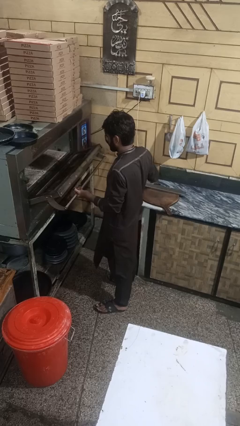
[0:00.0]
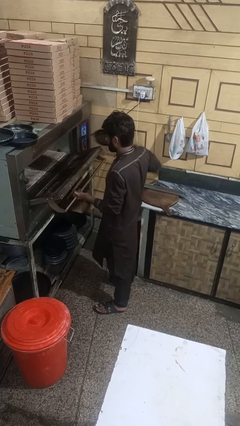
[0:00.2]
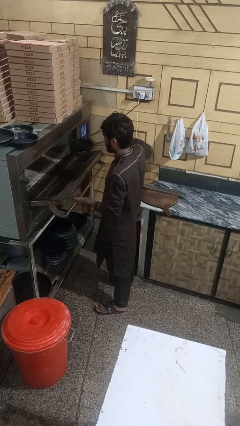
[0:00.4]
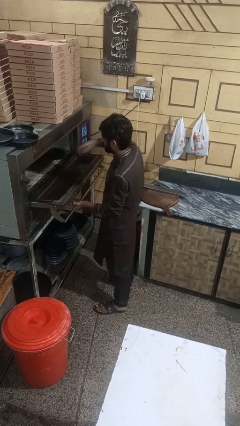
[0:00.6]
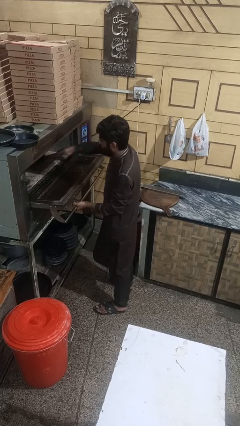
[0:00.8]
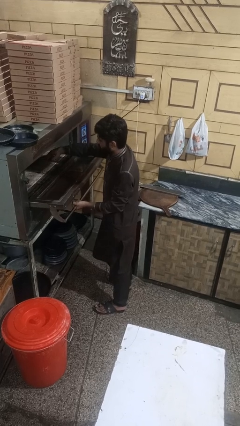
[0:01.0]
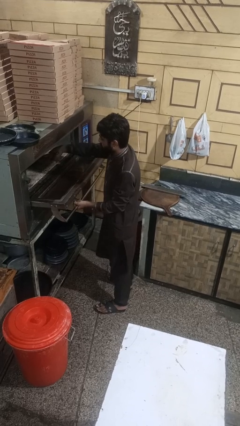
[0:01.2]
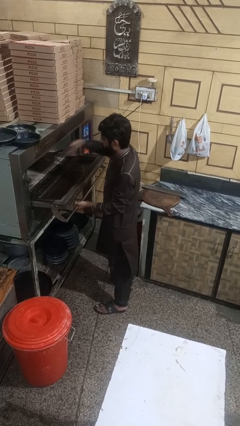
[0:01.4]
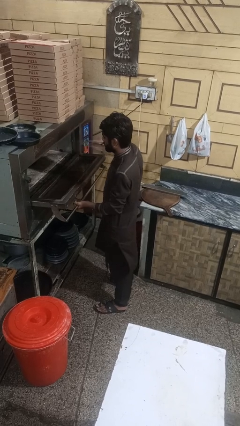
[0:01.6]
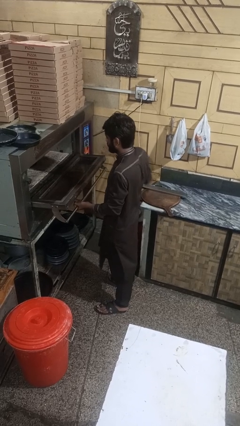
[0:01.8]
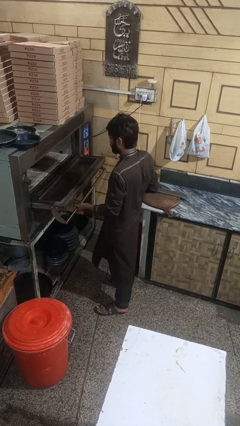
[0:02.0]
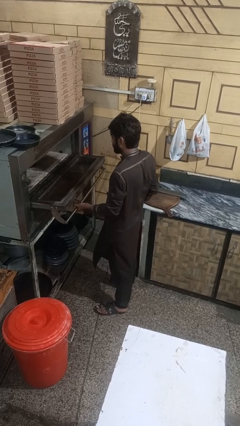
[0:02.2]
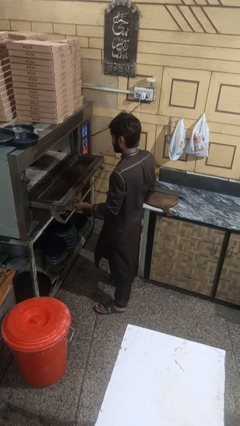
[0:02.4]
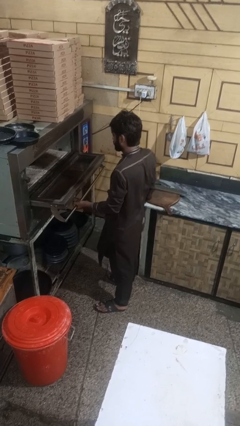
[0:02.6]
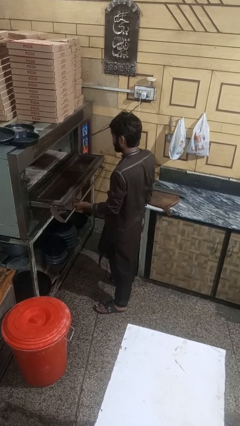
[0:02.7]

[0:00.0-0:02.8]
person puts object into microwave

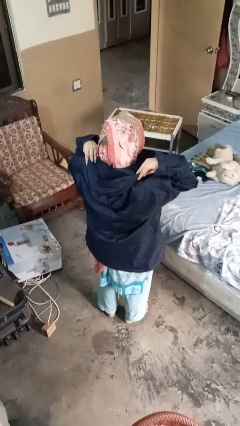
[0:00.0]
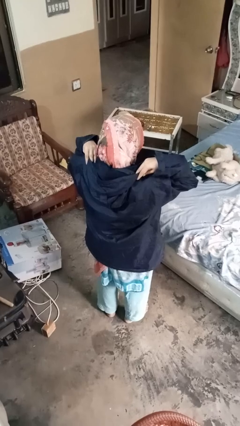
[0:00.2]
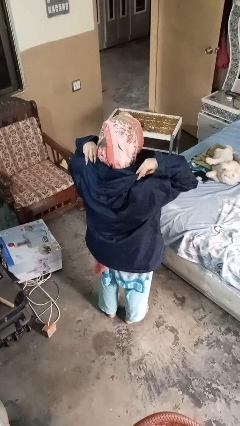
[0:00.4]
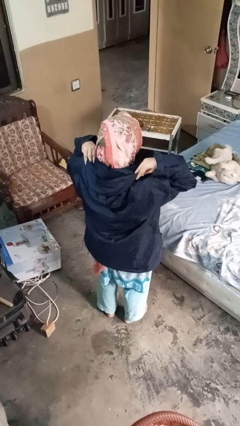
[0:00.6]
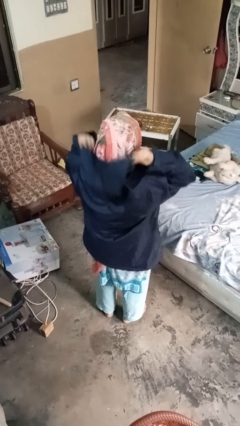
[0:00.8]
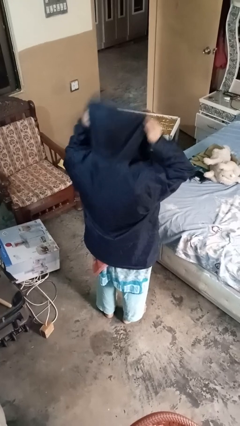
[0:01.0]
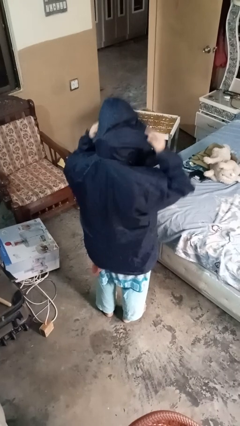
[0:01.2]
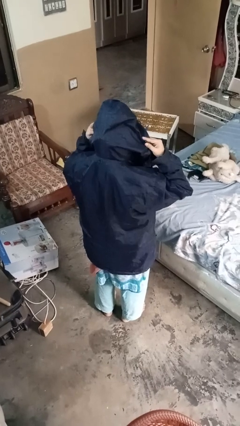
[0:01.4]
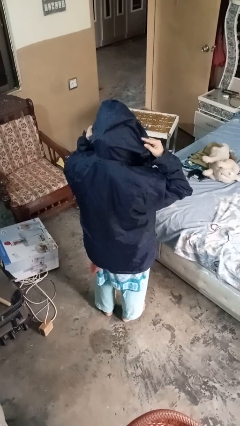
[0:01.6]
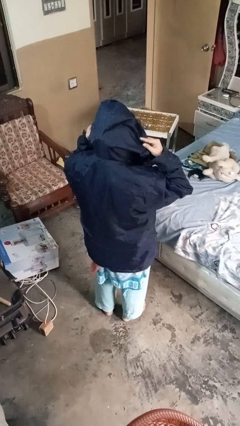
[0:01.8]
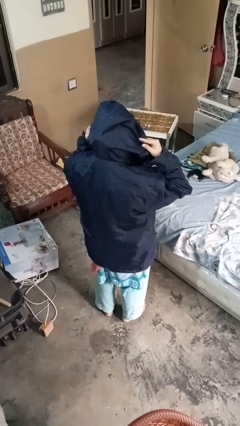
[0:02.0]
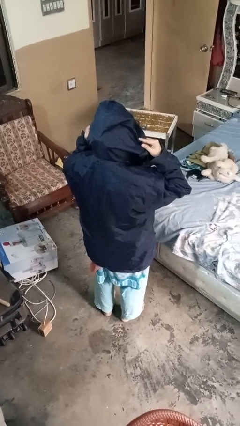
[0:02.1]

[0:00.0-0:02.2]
person puts on hoodie

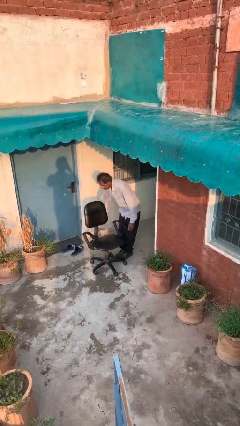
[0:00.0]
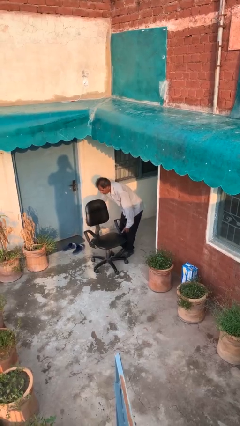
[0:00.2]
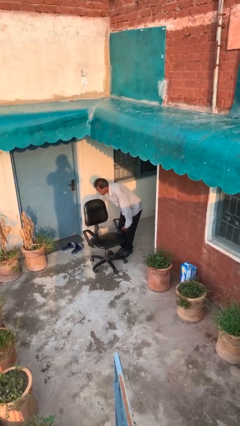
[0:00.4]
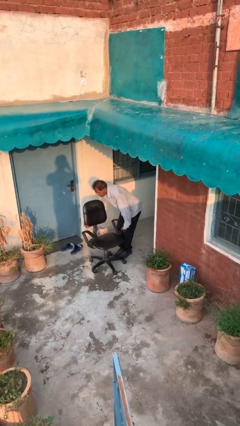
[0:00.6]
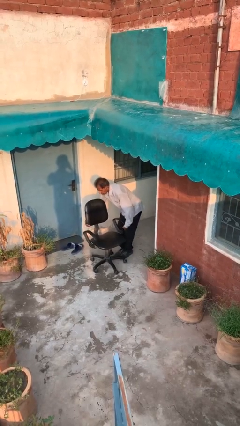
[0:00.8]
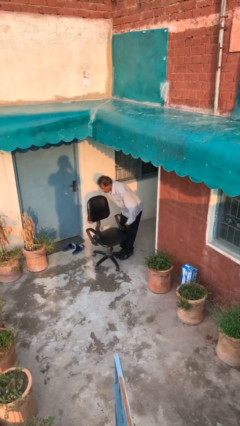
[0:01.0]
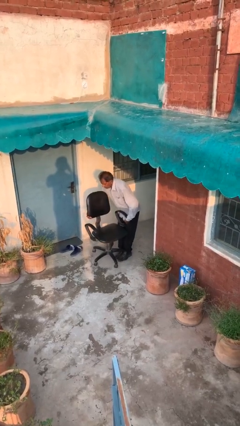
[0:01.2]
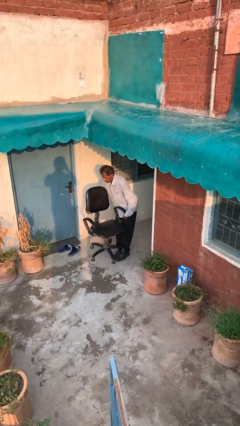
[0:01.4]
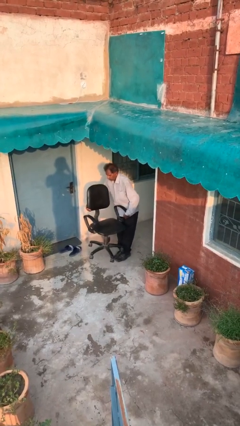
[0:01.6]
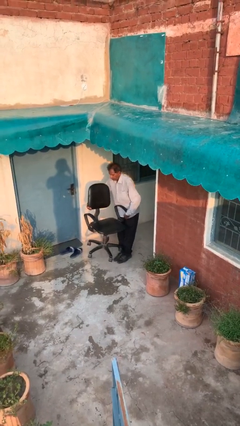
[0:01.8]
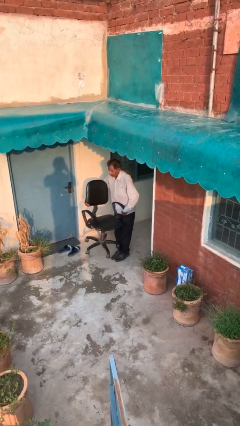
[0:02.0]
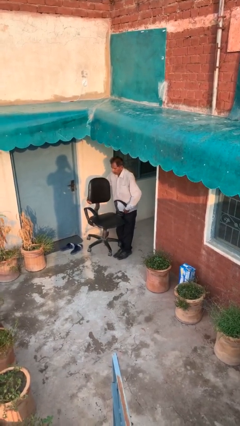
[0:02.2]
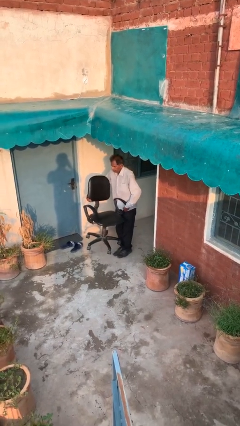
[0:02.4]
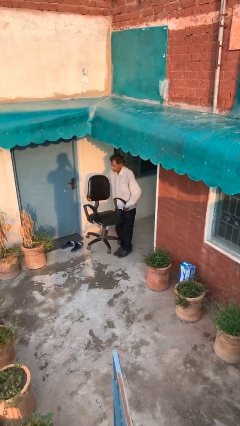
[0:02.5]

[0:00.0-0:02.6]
person picks up object from floor

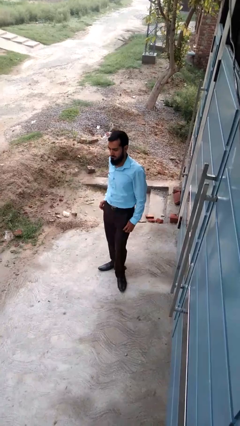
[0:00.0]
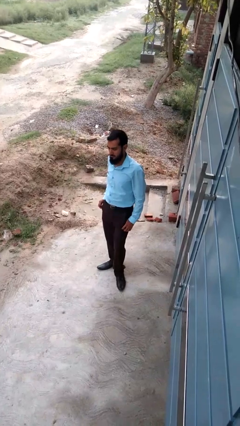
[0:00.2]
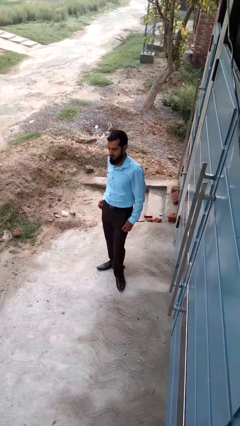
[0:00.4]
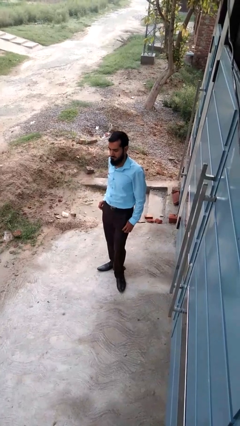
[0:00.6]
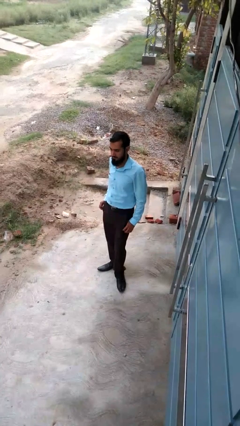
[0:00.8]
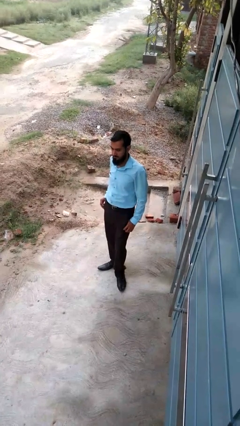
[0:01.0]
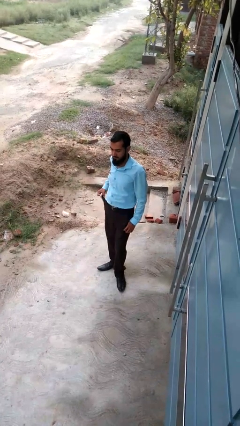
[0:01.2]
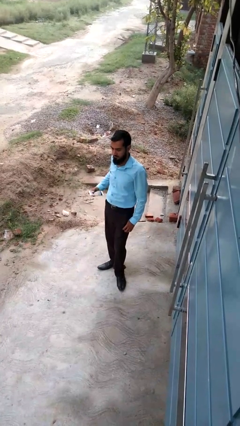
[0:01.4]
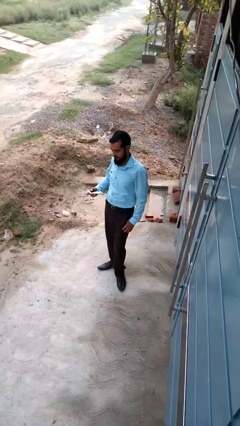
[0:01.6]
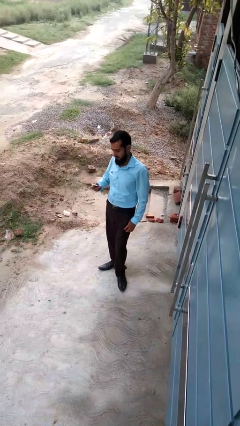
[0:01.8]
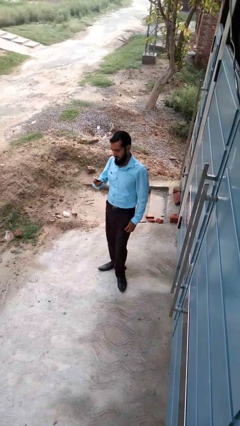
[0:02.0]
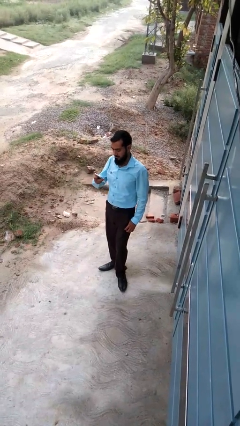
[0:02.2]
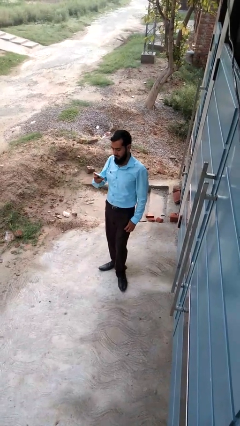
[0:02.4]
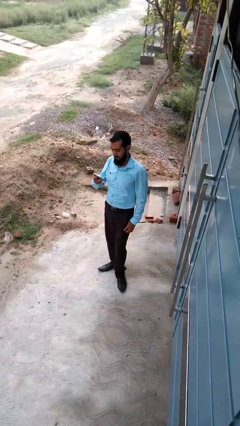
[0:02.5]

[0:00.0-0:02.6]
person takes phone from pocket

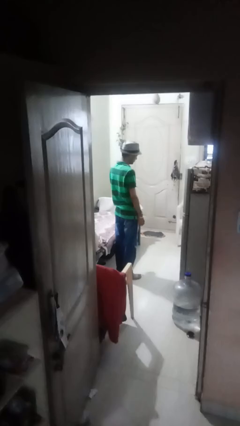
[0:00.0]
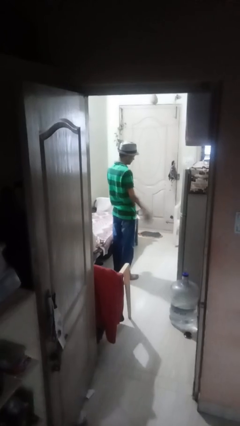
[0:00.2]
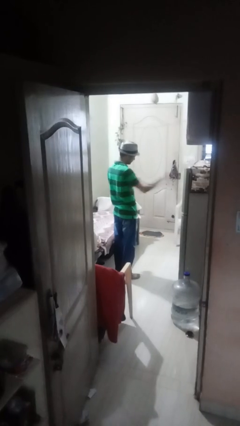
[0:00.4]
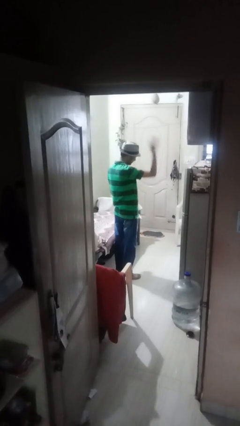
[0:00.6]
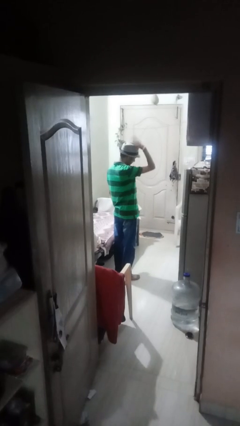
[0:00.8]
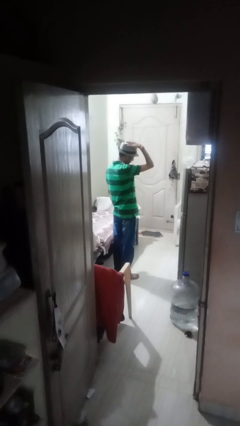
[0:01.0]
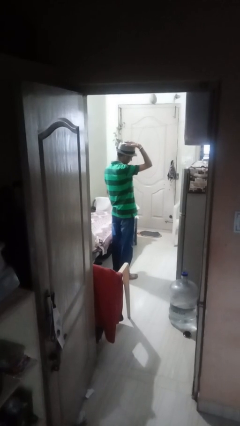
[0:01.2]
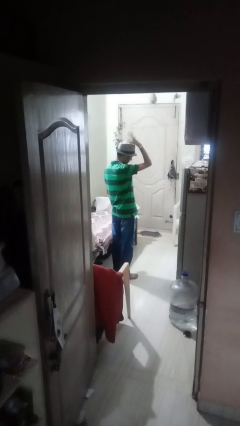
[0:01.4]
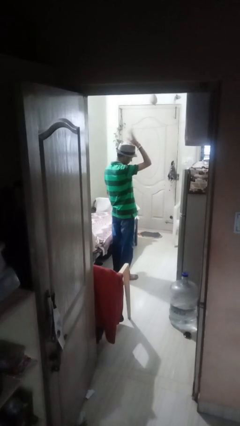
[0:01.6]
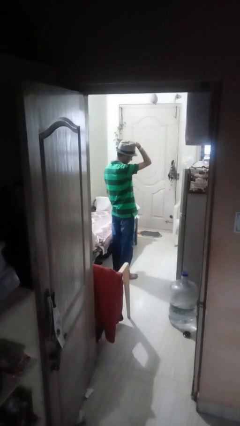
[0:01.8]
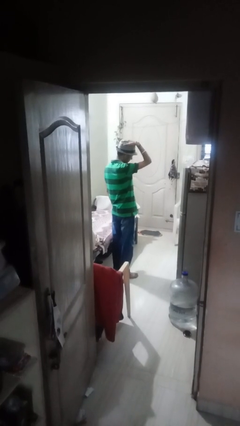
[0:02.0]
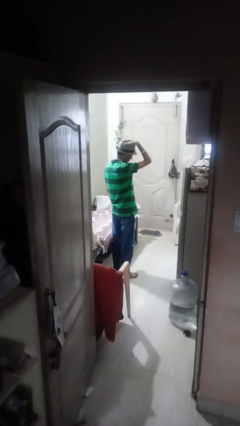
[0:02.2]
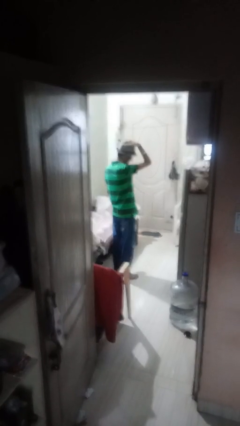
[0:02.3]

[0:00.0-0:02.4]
person pats head

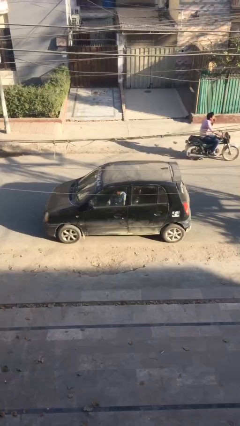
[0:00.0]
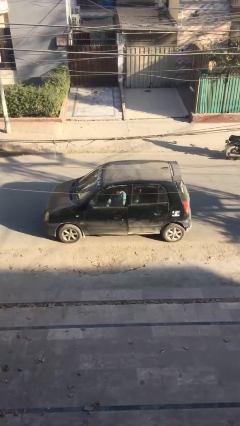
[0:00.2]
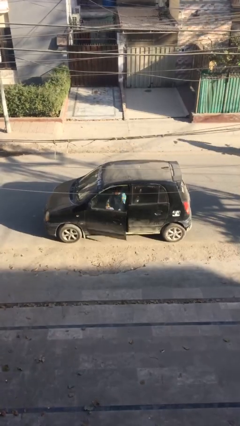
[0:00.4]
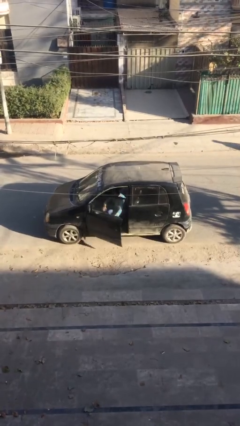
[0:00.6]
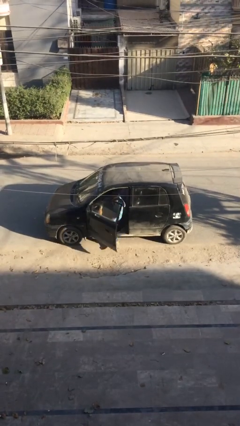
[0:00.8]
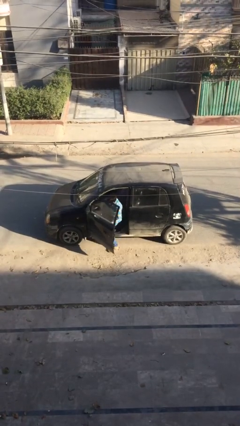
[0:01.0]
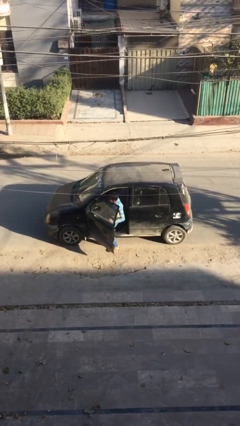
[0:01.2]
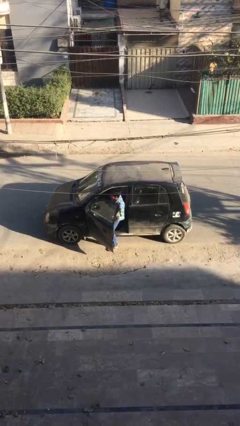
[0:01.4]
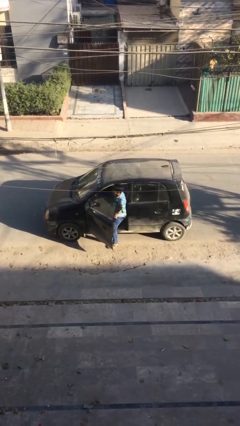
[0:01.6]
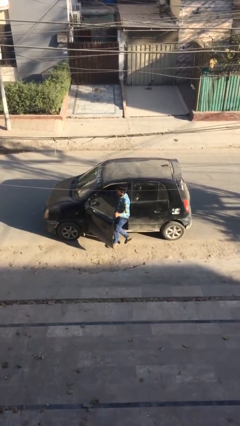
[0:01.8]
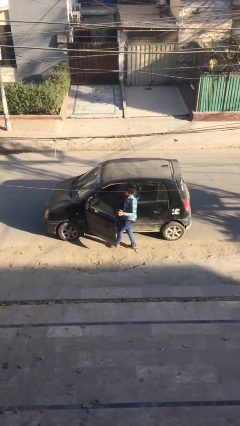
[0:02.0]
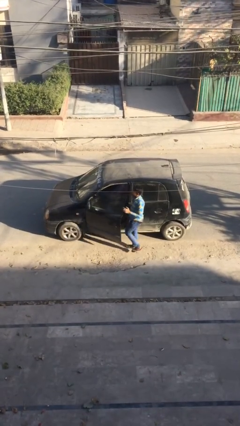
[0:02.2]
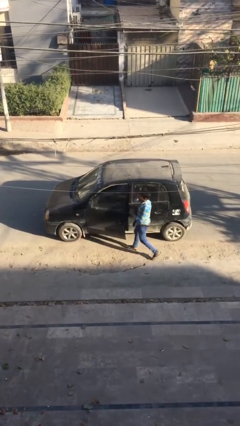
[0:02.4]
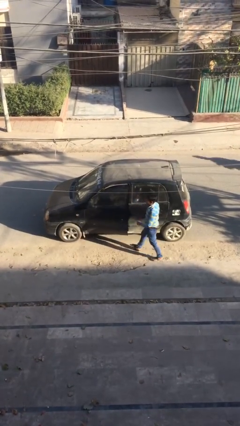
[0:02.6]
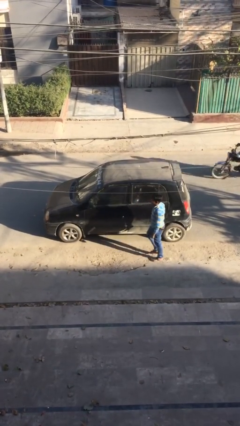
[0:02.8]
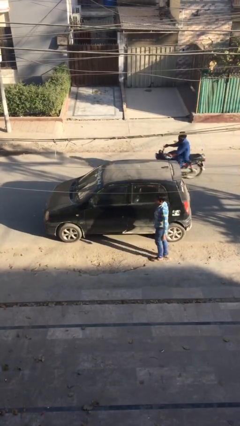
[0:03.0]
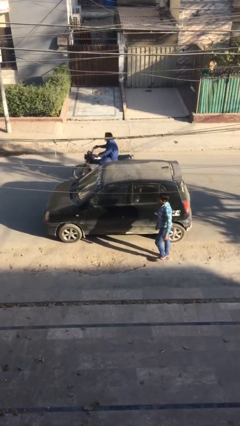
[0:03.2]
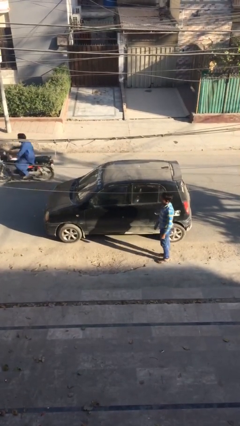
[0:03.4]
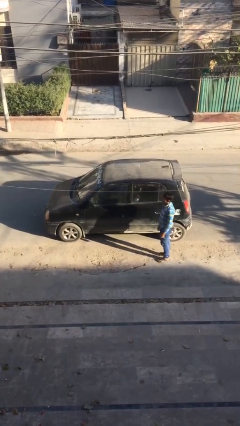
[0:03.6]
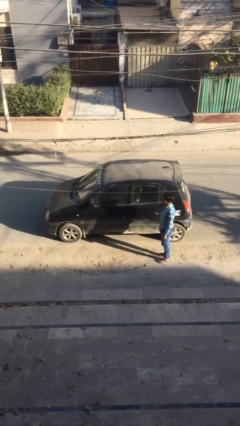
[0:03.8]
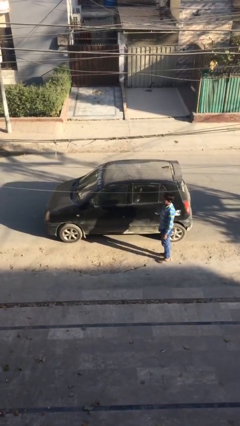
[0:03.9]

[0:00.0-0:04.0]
car drops off person

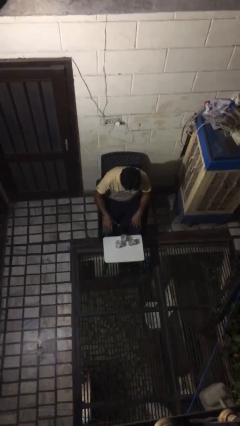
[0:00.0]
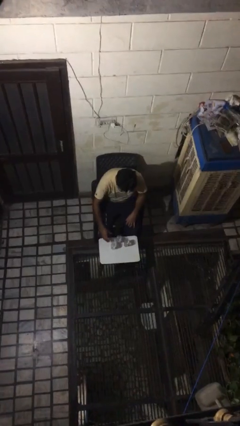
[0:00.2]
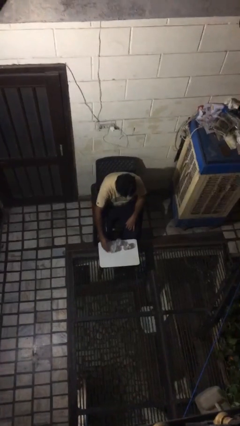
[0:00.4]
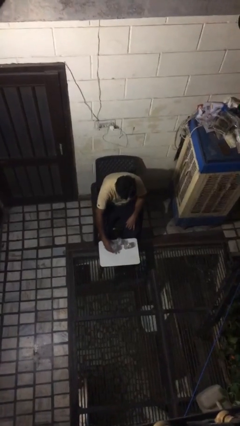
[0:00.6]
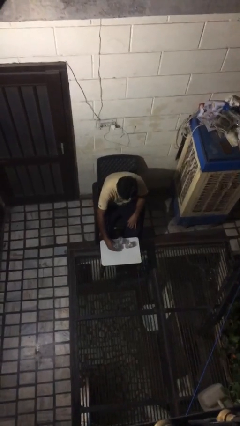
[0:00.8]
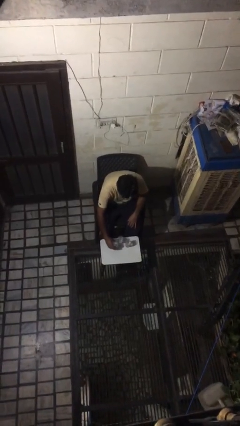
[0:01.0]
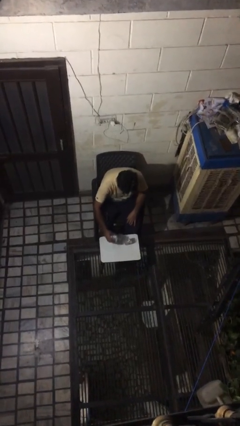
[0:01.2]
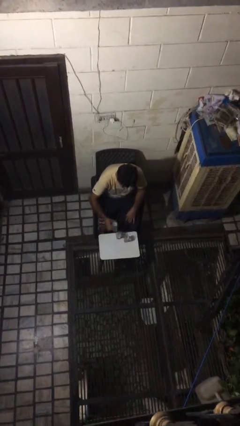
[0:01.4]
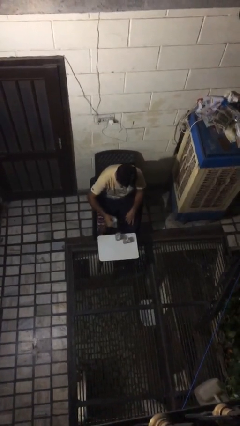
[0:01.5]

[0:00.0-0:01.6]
person picks up object from table
